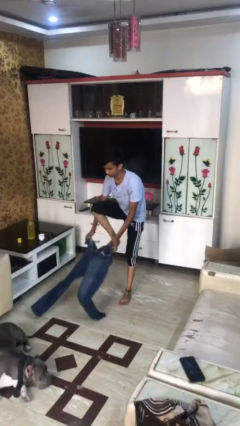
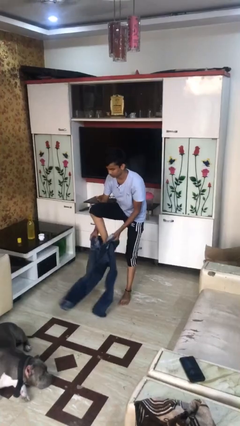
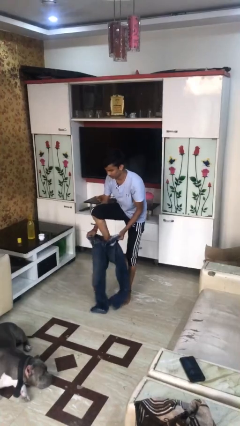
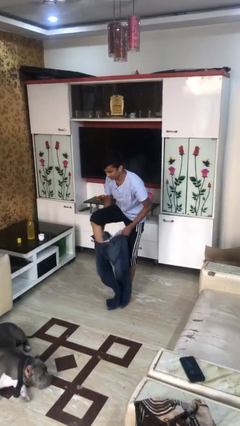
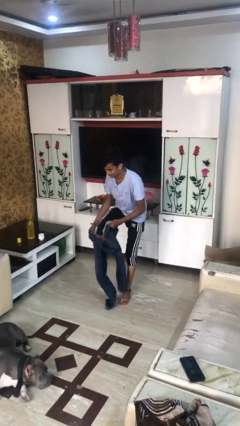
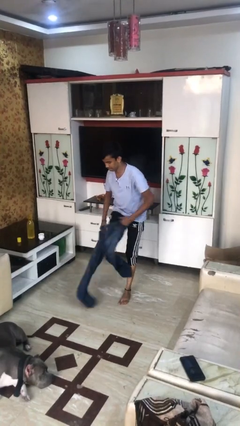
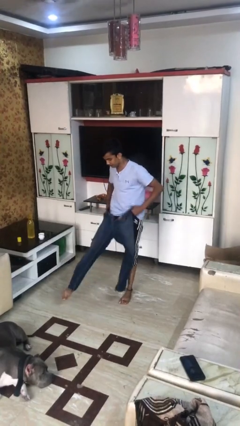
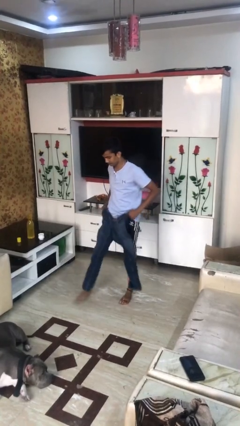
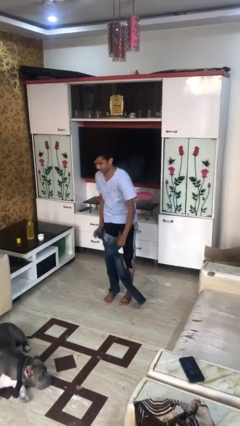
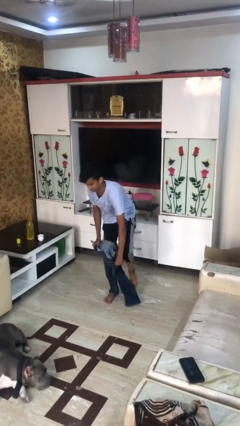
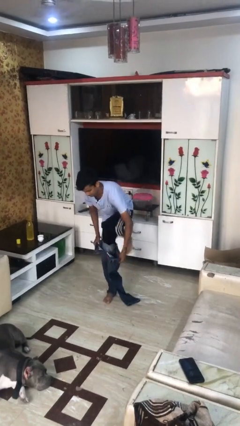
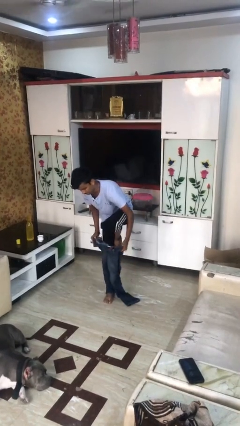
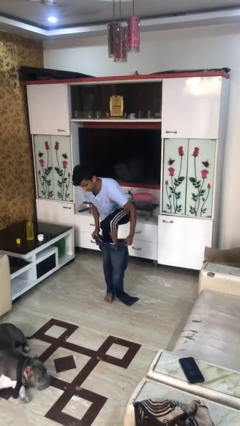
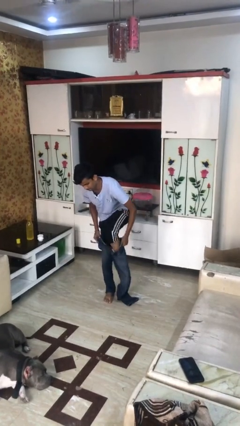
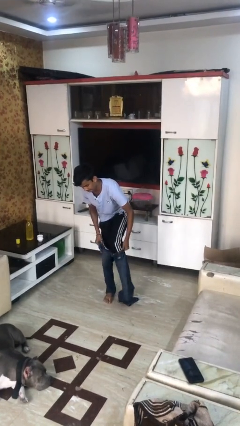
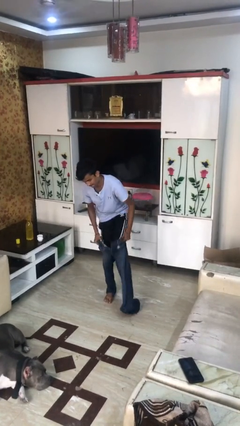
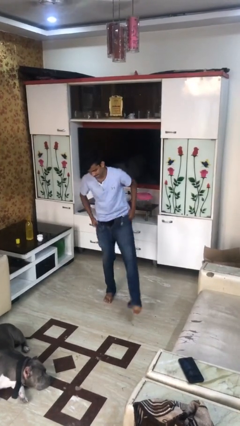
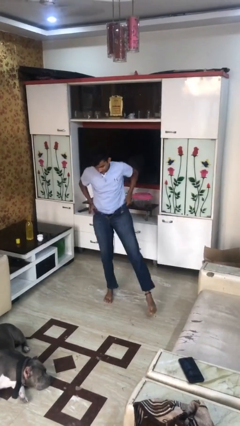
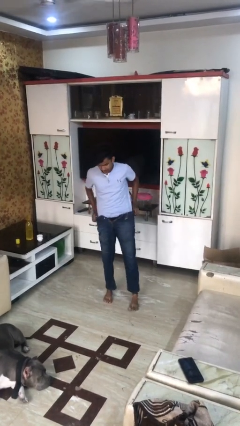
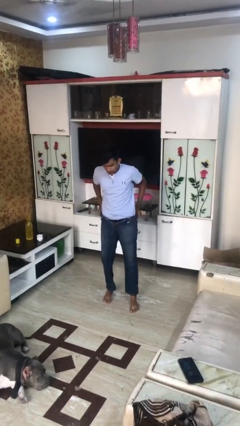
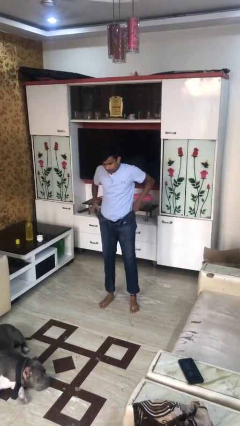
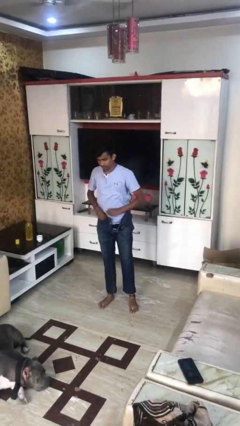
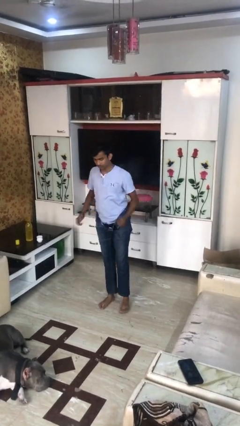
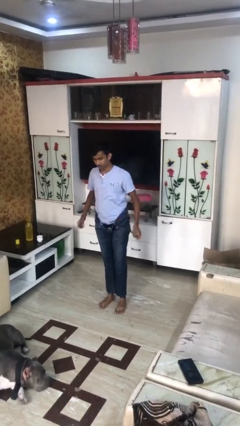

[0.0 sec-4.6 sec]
person puts on pants

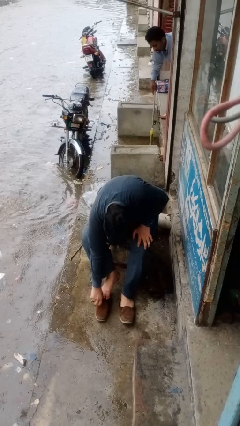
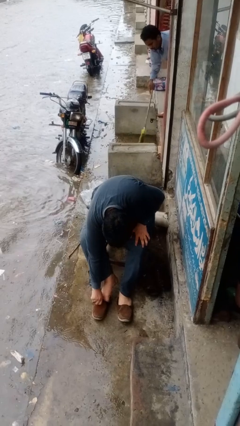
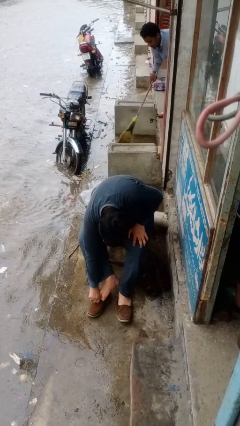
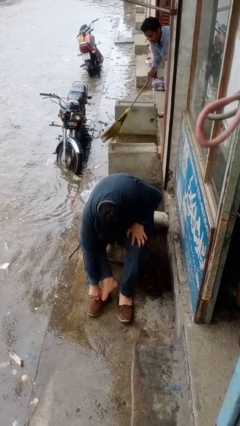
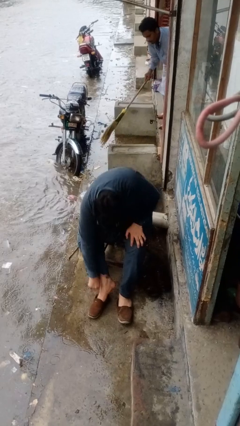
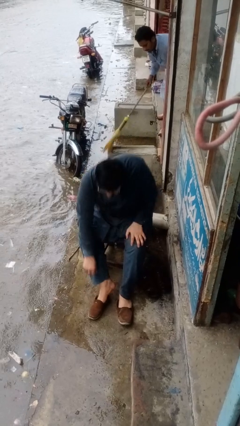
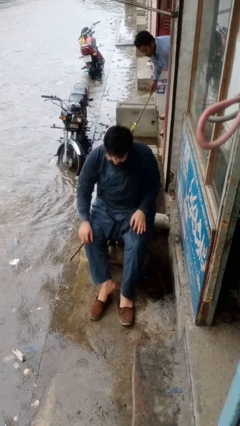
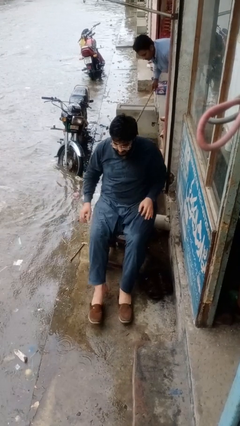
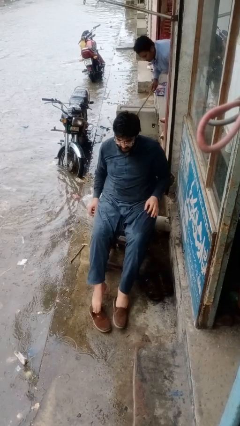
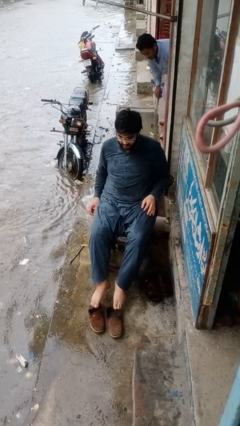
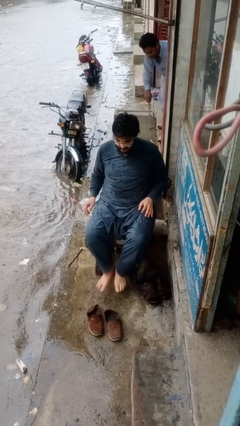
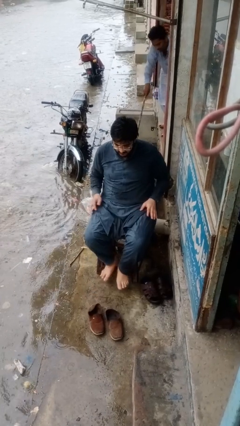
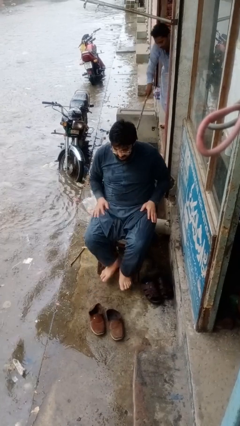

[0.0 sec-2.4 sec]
person takes off shoes

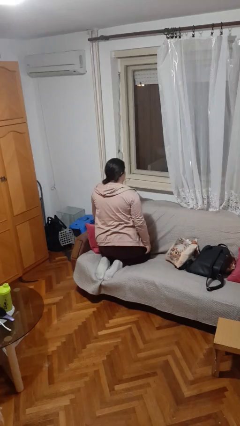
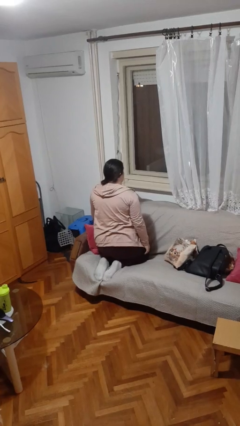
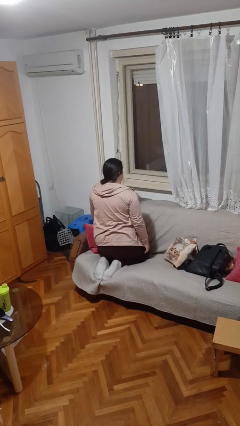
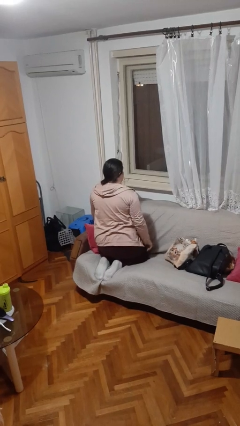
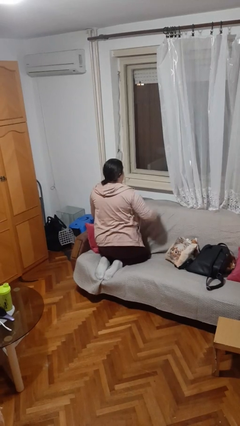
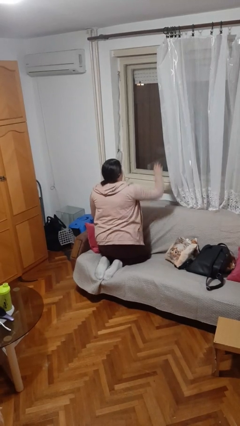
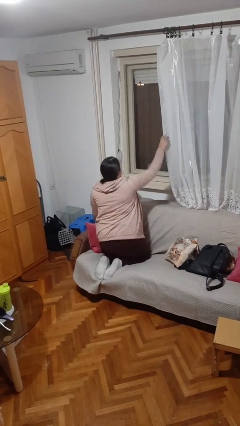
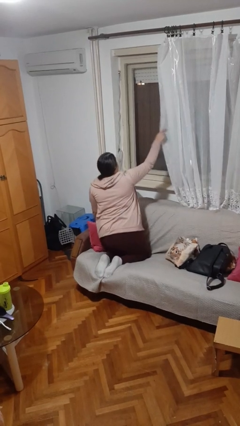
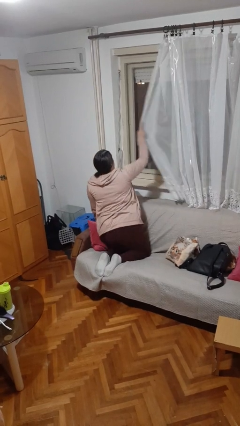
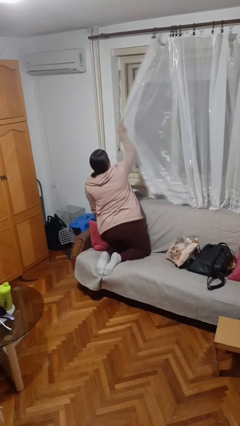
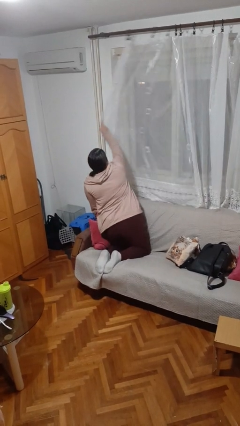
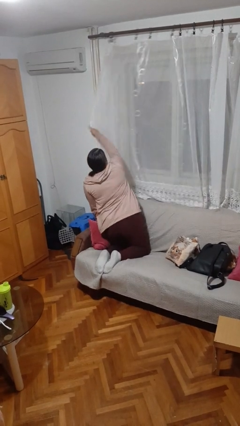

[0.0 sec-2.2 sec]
person closes curtains

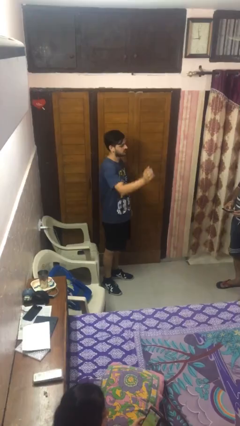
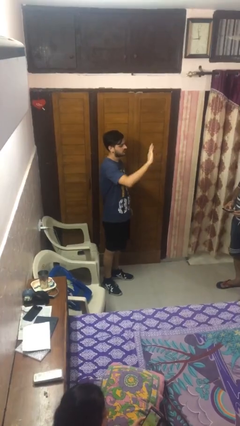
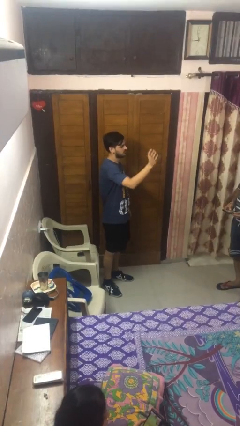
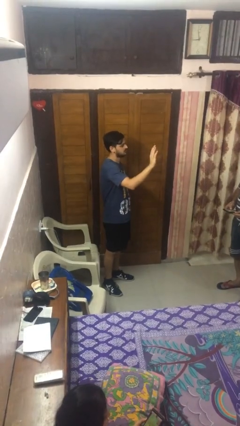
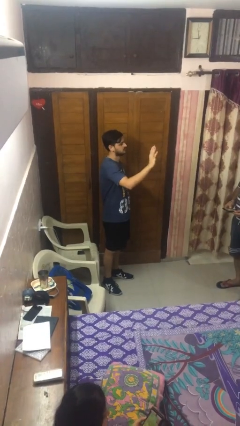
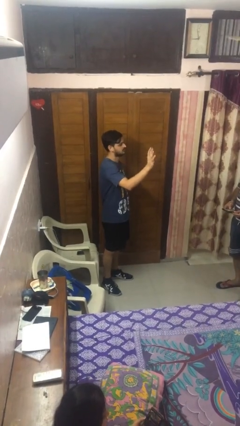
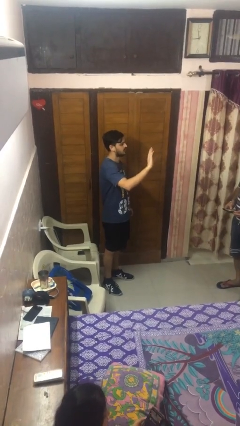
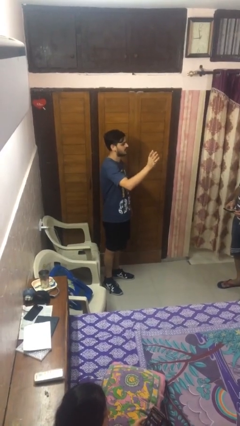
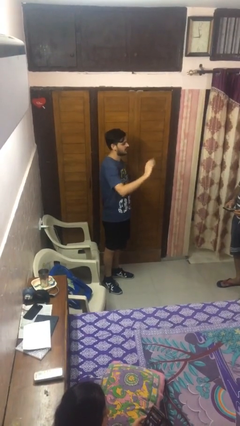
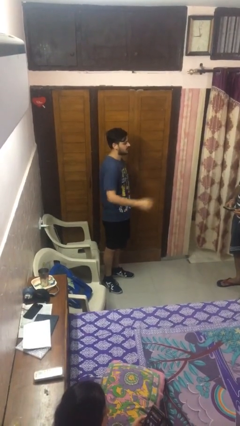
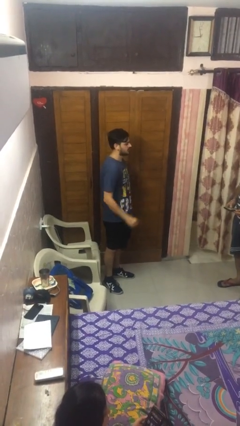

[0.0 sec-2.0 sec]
person waves at person

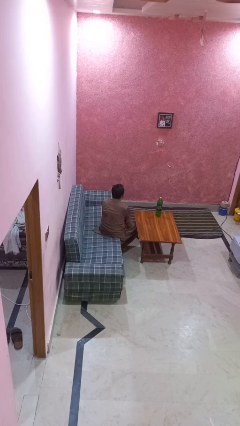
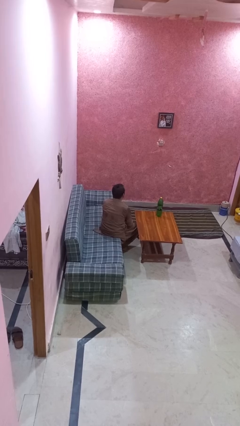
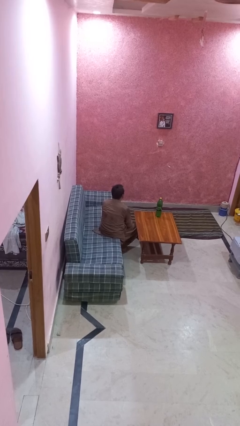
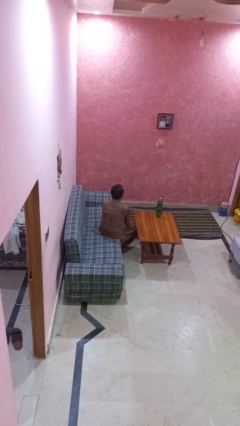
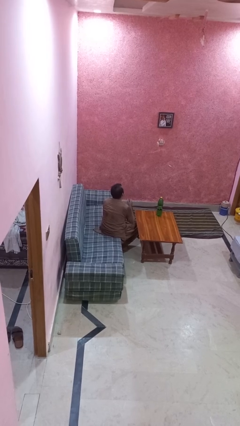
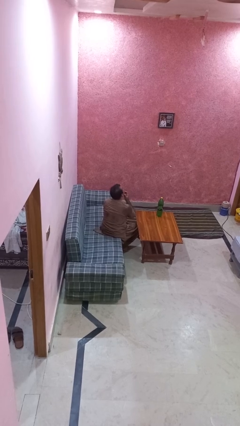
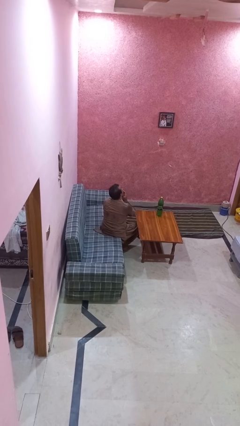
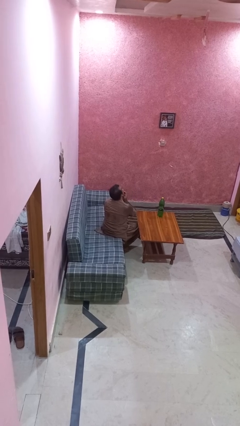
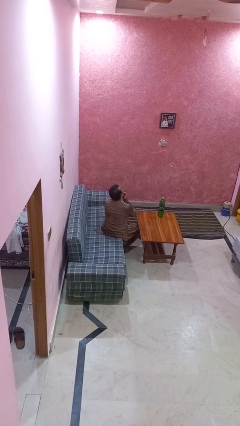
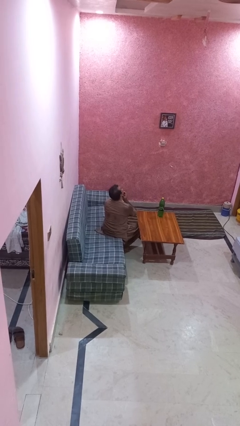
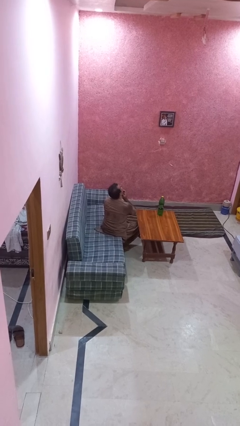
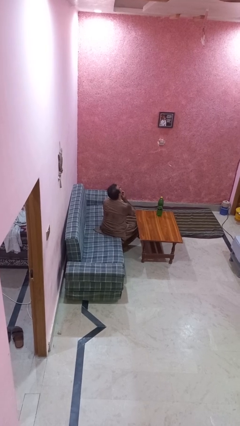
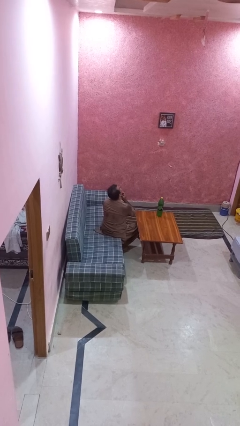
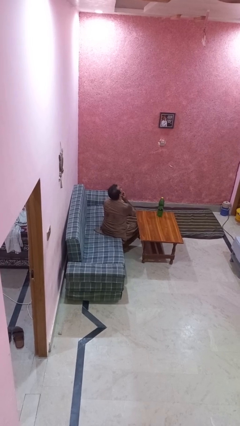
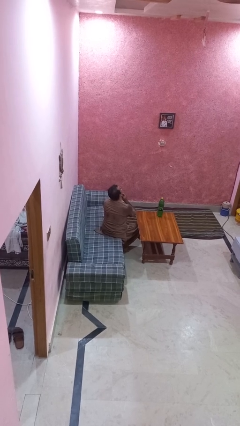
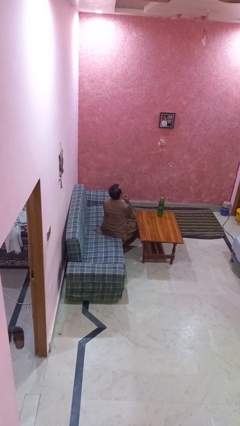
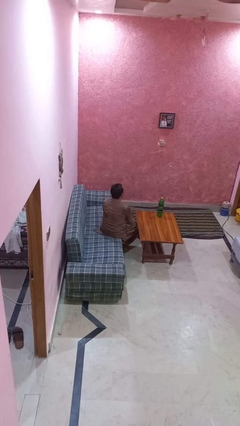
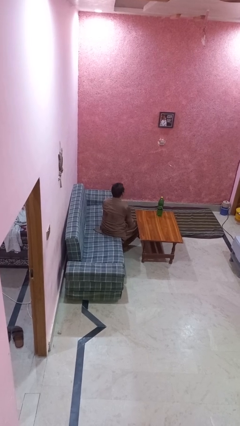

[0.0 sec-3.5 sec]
person strokes chin

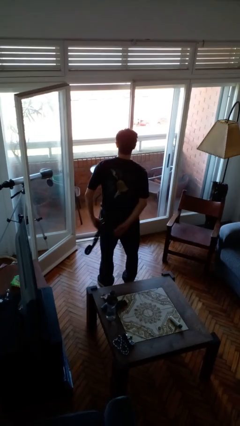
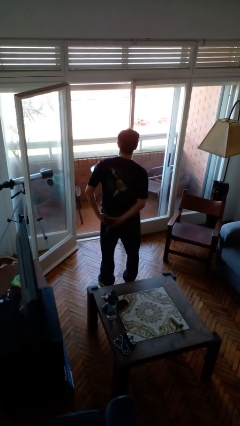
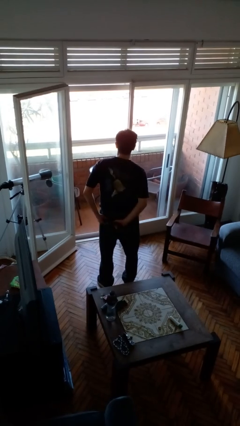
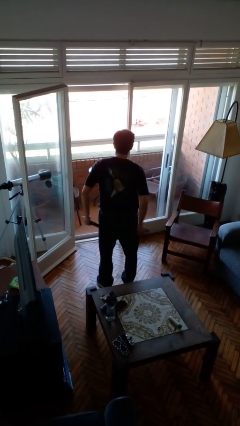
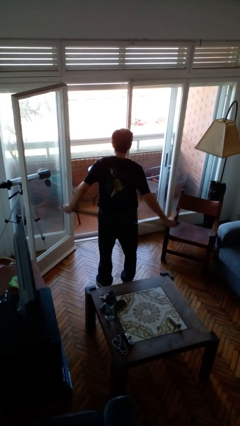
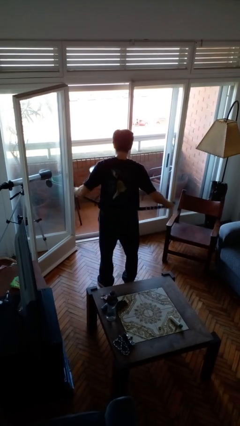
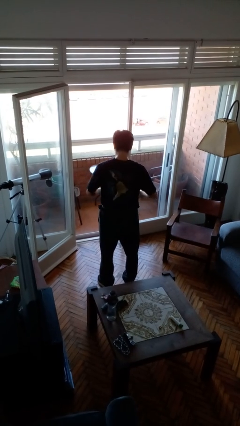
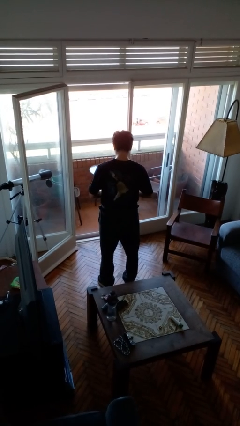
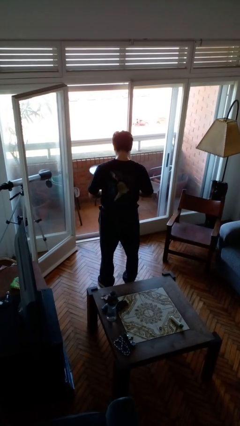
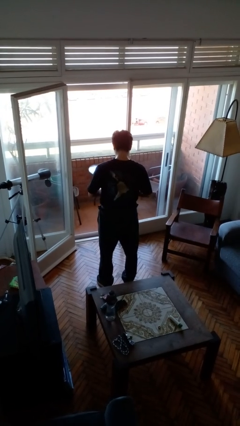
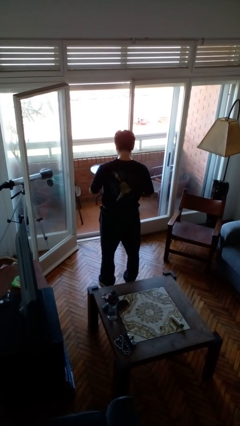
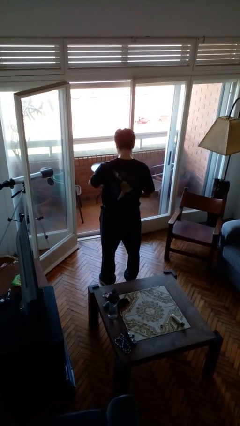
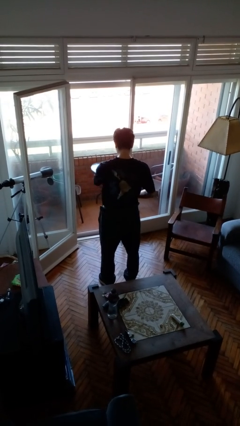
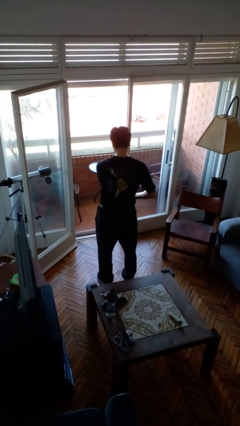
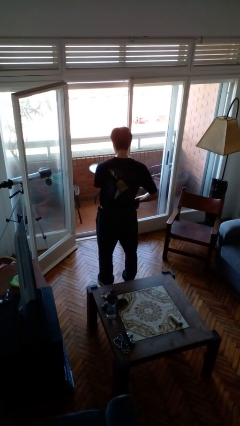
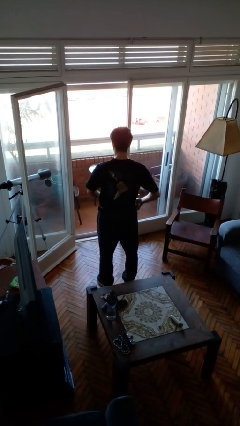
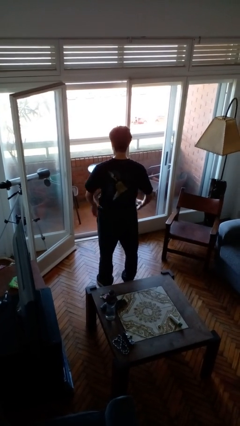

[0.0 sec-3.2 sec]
person puts on belt
